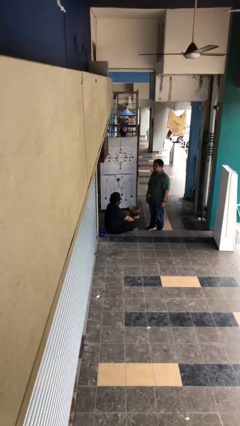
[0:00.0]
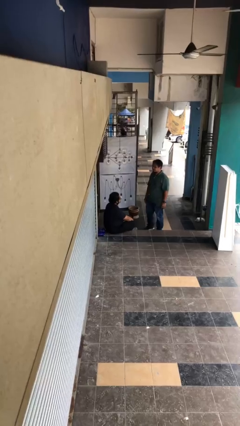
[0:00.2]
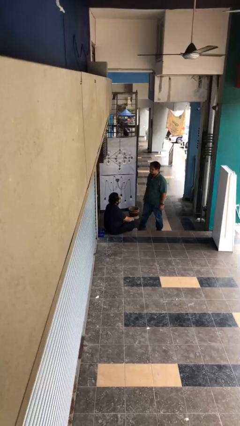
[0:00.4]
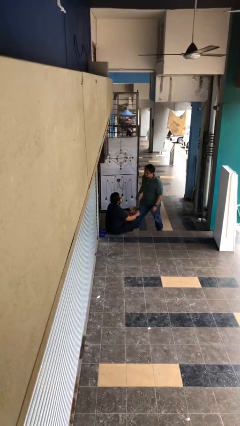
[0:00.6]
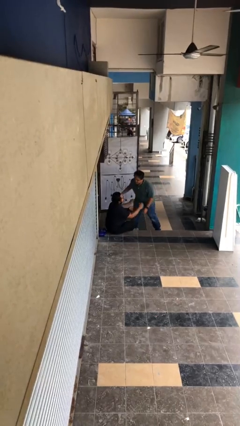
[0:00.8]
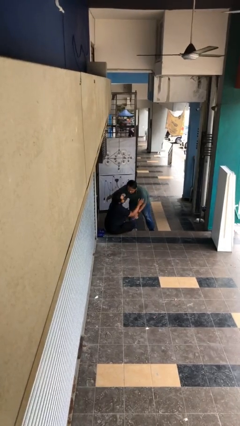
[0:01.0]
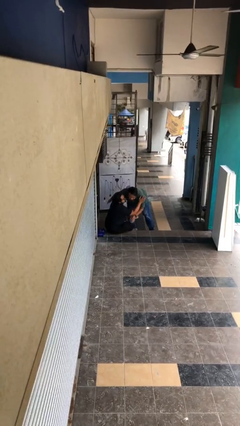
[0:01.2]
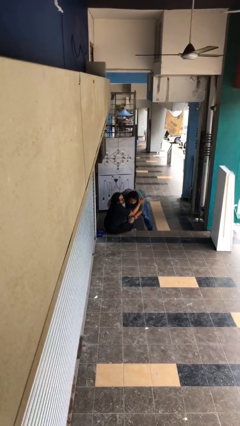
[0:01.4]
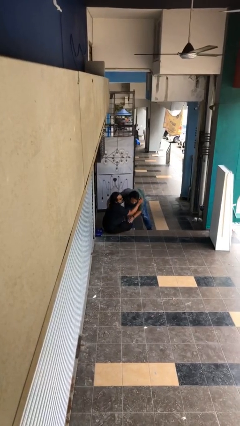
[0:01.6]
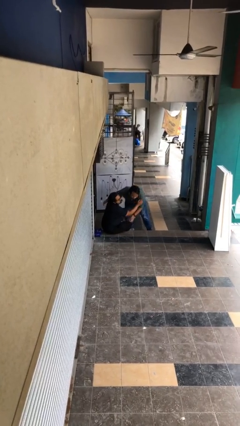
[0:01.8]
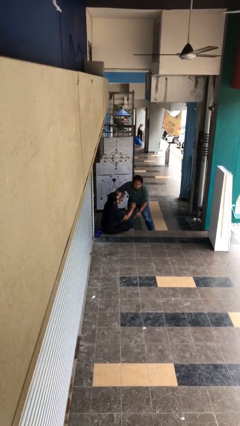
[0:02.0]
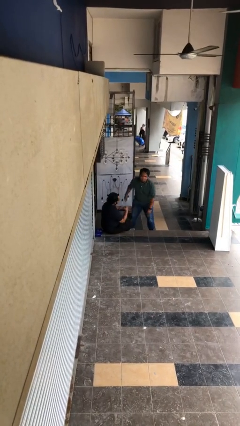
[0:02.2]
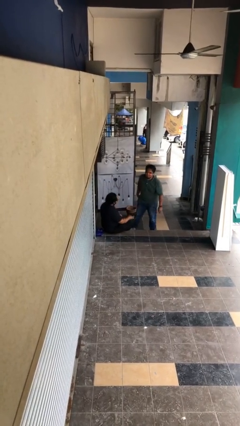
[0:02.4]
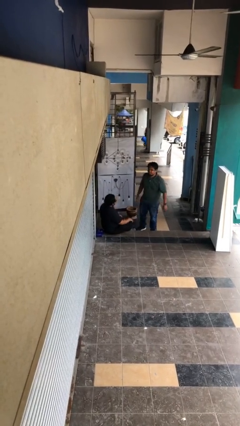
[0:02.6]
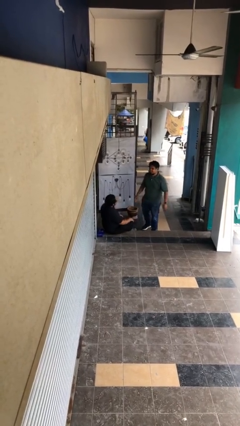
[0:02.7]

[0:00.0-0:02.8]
person embraces person

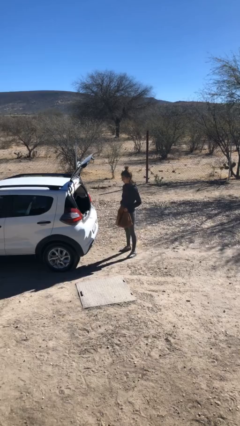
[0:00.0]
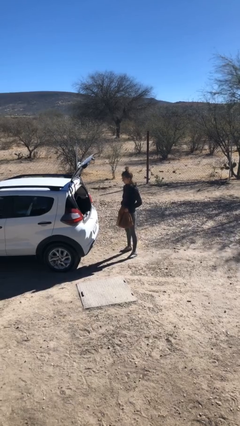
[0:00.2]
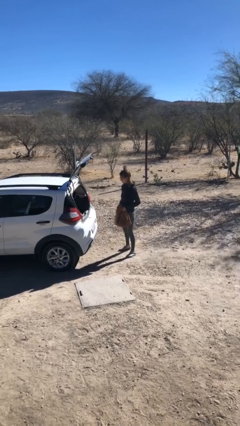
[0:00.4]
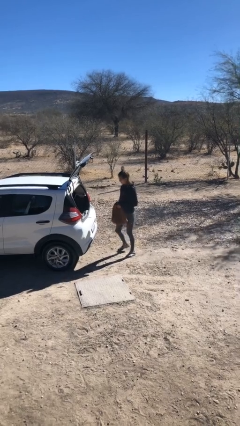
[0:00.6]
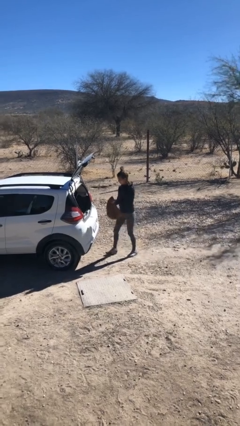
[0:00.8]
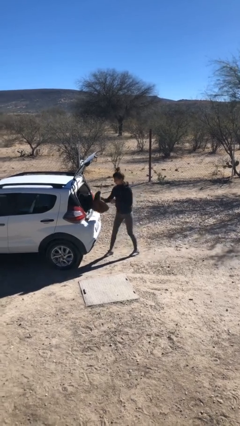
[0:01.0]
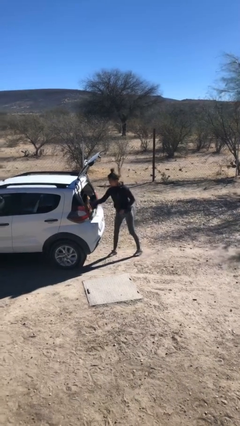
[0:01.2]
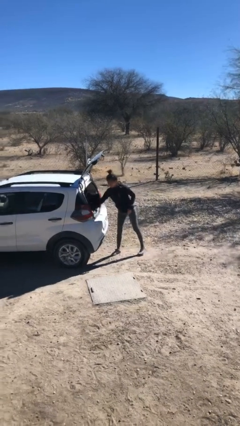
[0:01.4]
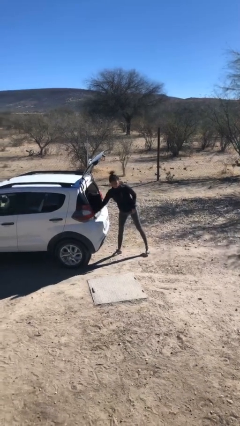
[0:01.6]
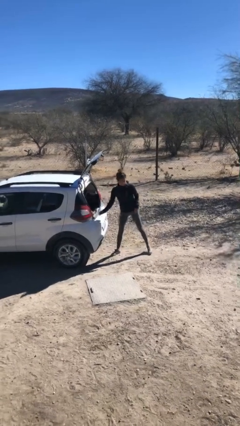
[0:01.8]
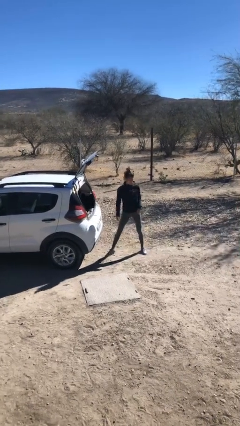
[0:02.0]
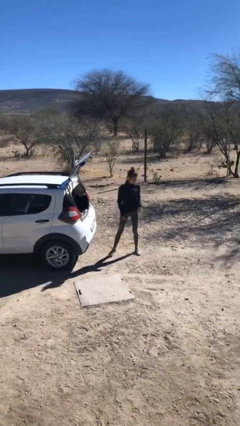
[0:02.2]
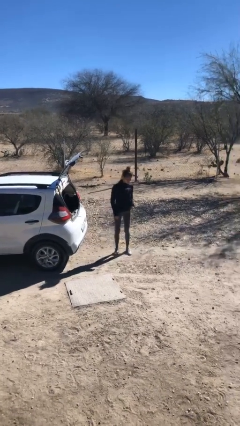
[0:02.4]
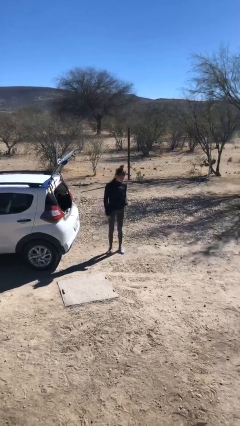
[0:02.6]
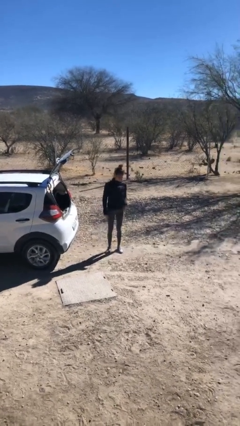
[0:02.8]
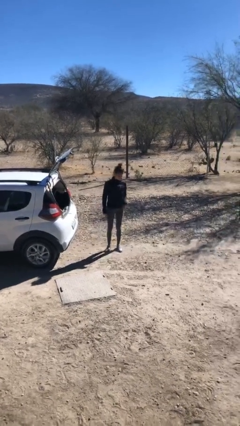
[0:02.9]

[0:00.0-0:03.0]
person loads car

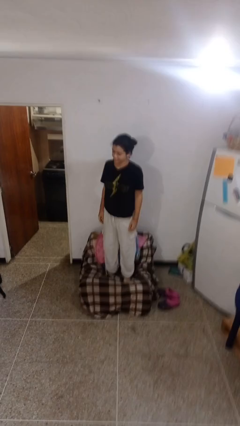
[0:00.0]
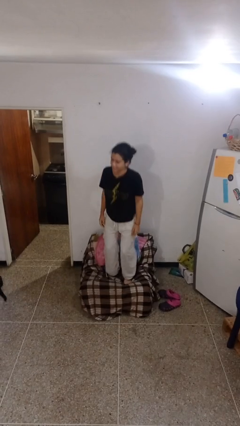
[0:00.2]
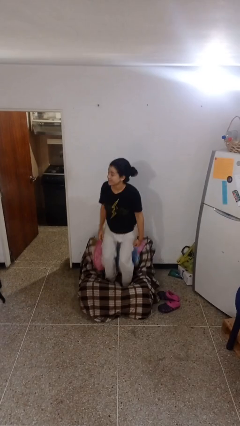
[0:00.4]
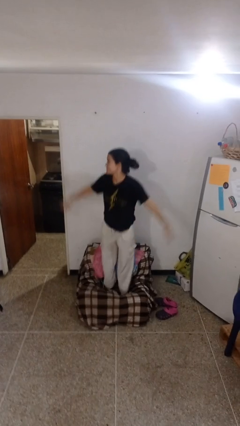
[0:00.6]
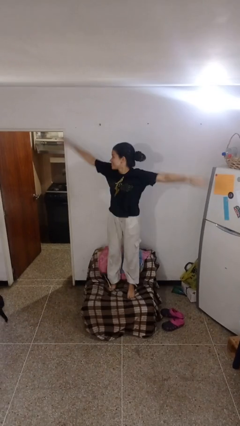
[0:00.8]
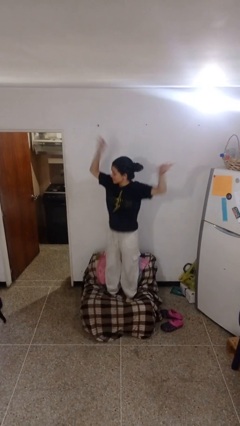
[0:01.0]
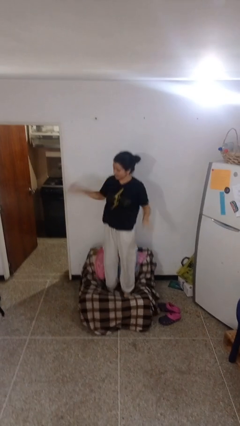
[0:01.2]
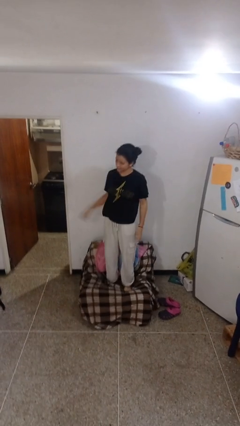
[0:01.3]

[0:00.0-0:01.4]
person jumps on couch

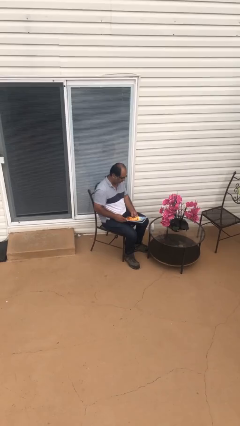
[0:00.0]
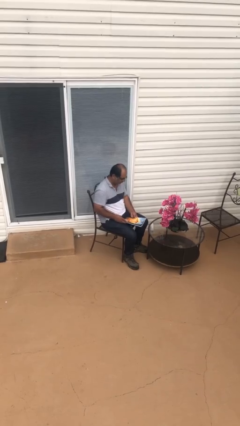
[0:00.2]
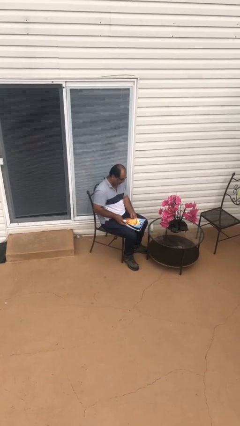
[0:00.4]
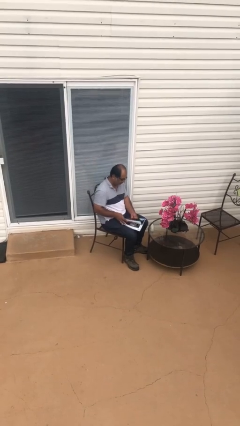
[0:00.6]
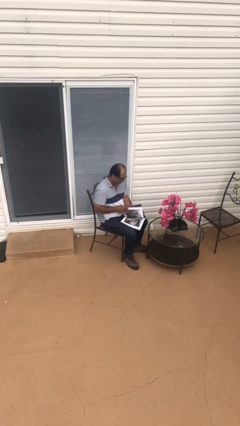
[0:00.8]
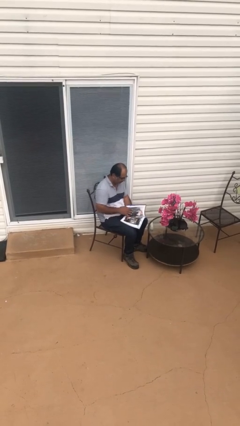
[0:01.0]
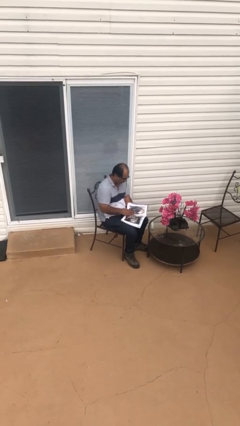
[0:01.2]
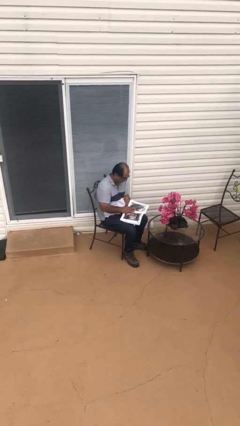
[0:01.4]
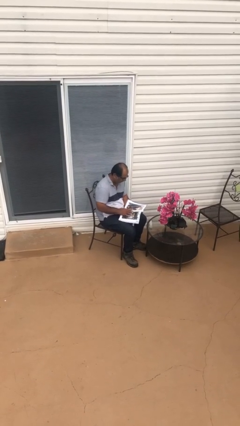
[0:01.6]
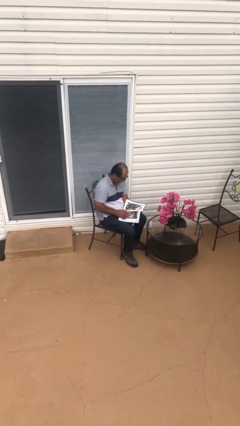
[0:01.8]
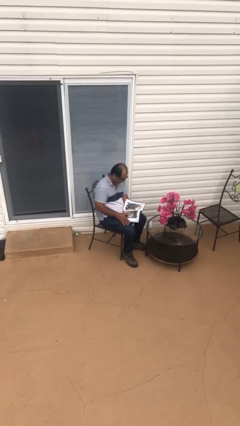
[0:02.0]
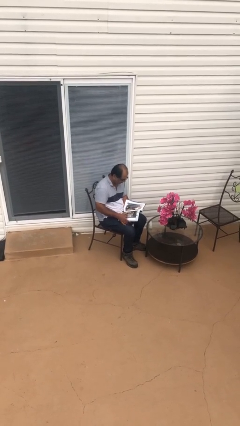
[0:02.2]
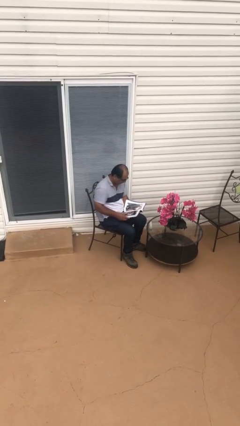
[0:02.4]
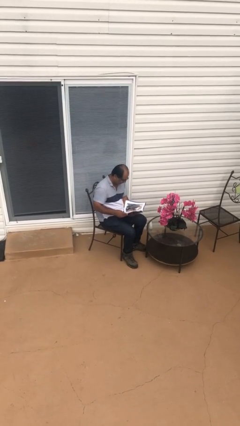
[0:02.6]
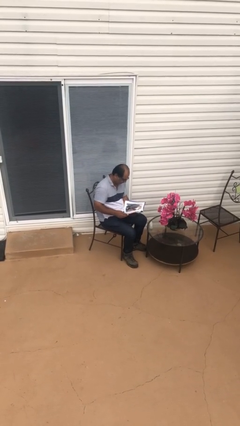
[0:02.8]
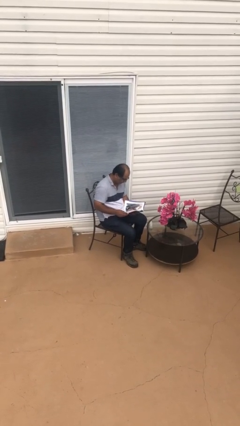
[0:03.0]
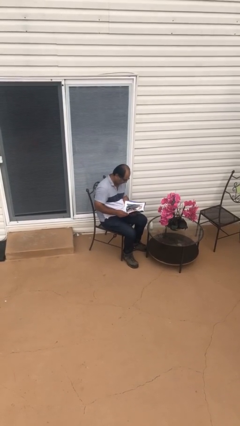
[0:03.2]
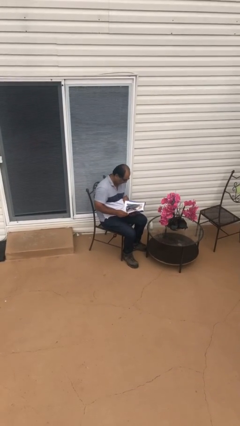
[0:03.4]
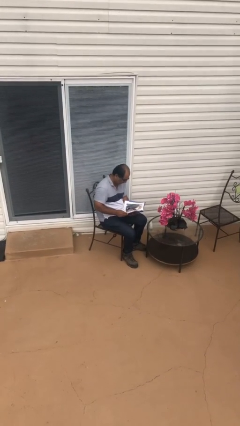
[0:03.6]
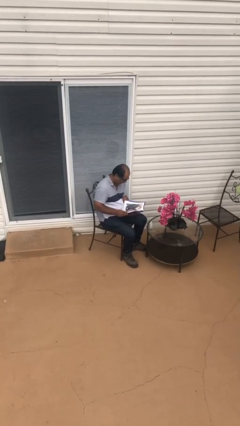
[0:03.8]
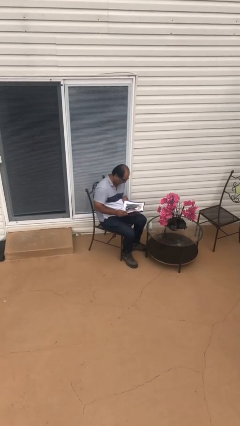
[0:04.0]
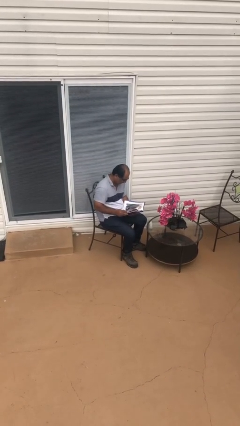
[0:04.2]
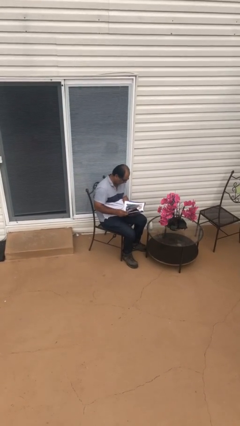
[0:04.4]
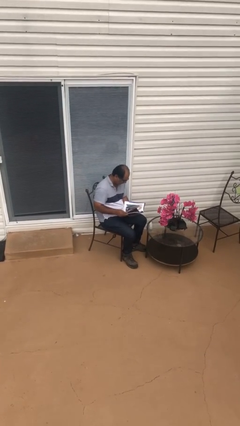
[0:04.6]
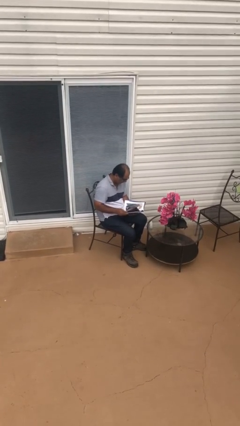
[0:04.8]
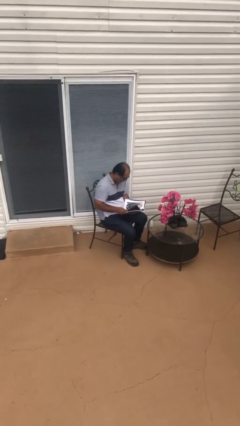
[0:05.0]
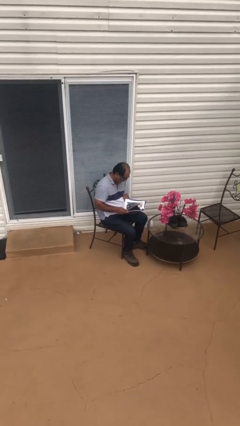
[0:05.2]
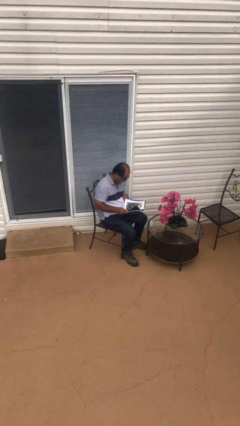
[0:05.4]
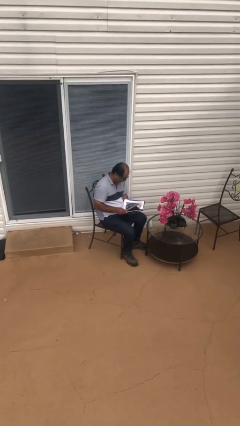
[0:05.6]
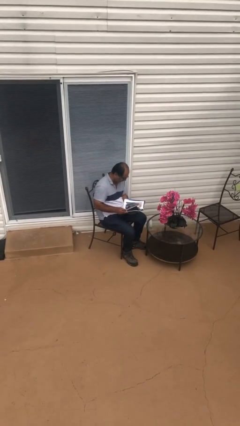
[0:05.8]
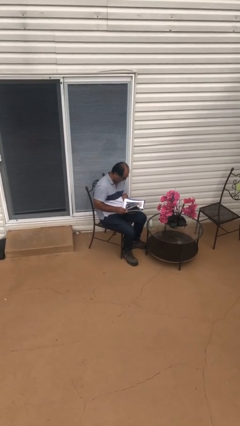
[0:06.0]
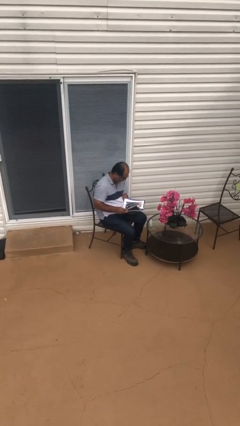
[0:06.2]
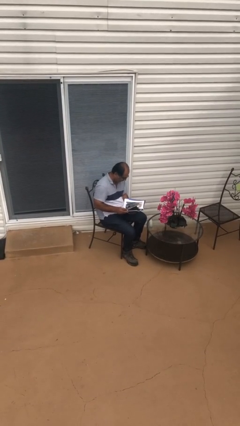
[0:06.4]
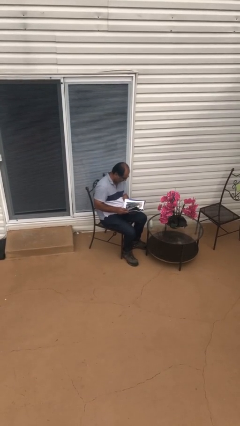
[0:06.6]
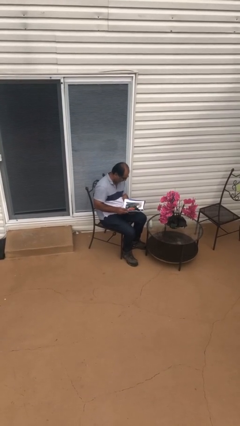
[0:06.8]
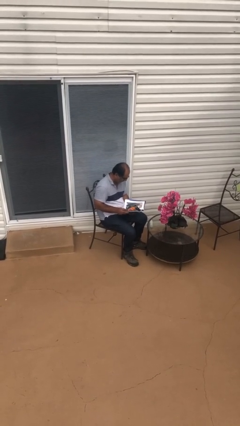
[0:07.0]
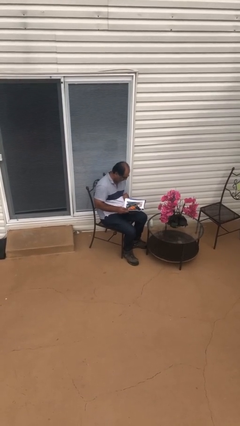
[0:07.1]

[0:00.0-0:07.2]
person reads document

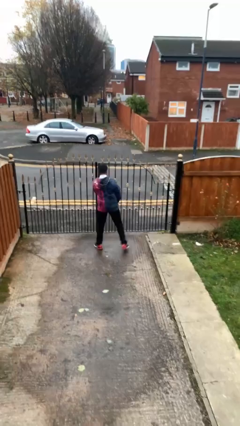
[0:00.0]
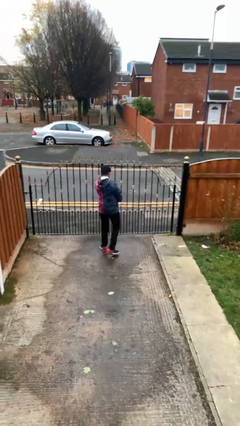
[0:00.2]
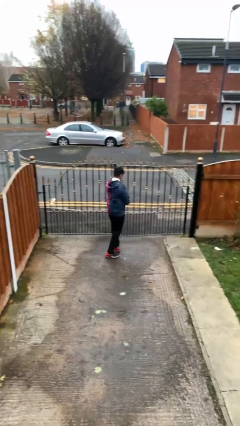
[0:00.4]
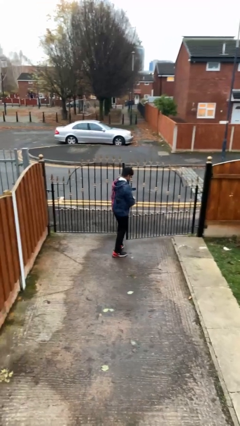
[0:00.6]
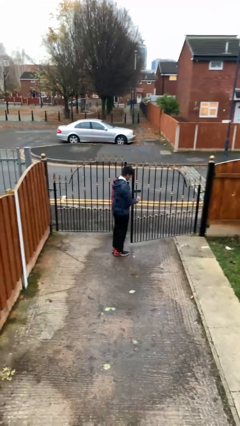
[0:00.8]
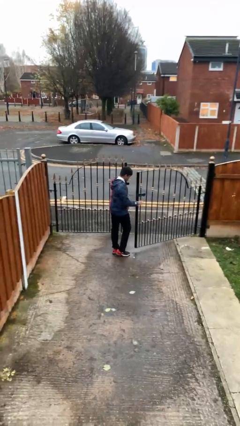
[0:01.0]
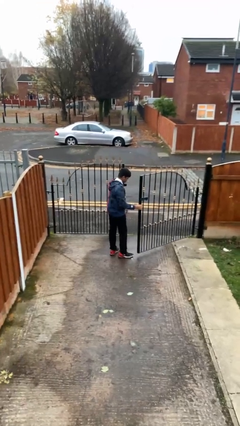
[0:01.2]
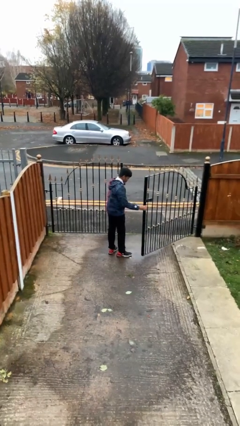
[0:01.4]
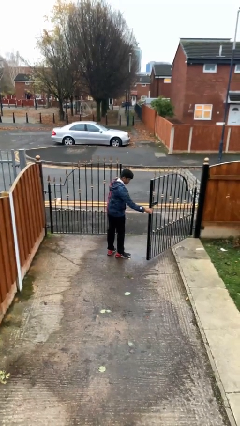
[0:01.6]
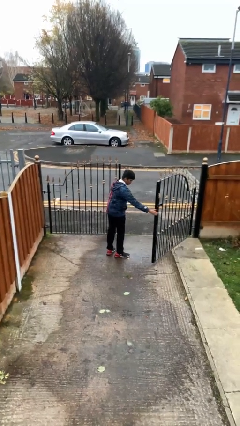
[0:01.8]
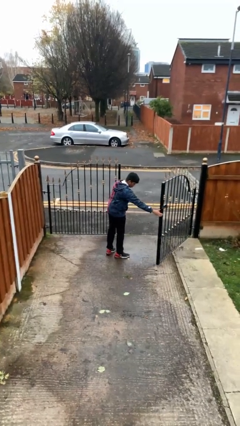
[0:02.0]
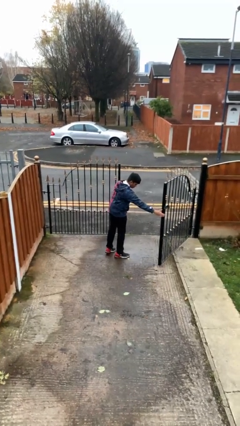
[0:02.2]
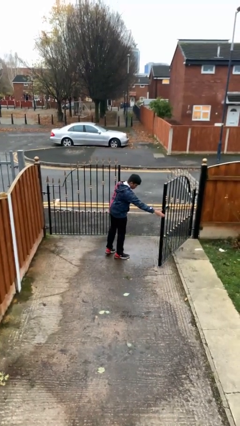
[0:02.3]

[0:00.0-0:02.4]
person opens facility door

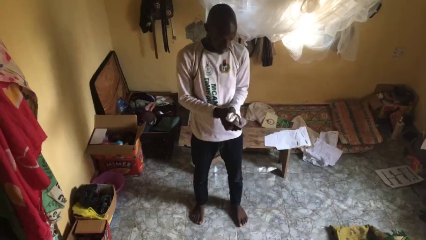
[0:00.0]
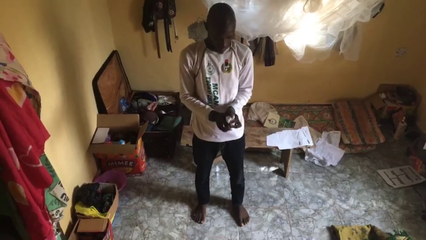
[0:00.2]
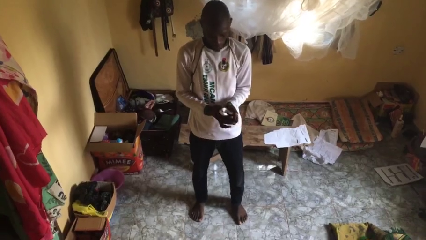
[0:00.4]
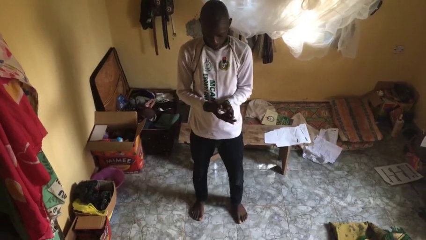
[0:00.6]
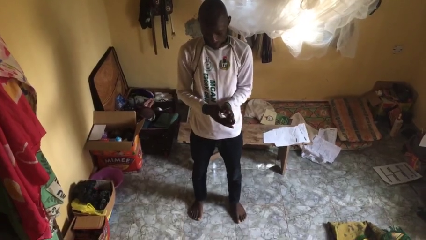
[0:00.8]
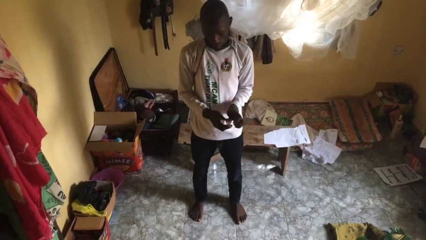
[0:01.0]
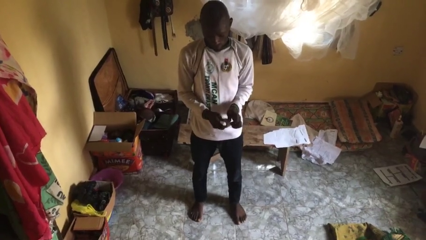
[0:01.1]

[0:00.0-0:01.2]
person crumples paper
